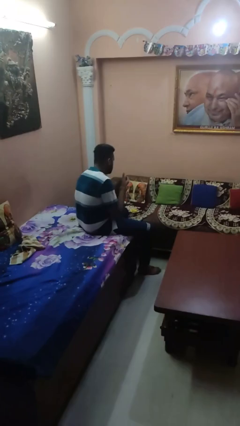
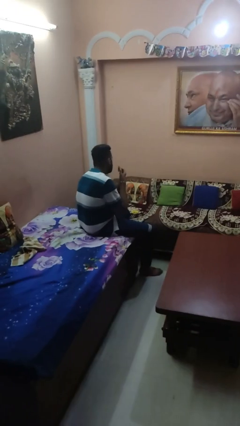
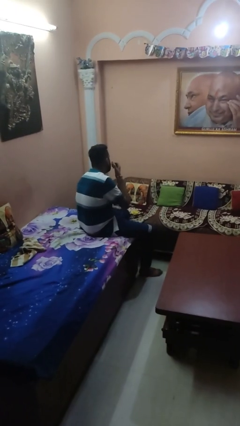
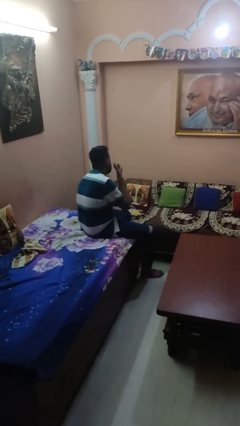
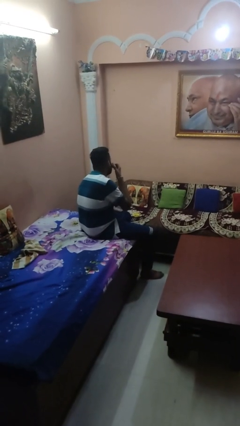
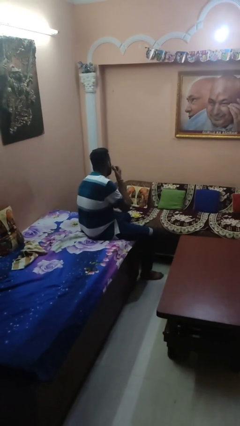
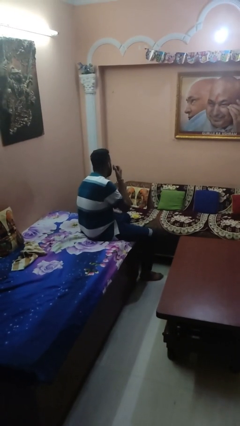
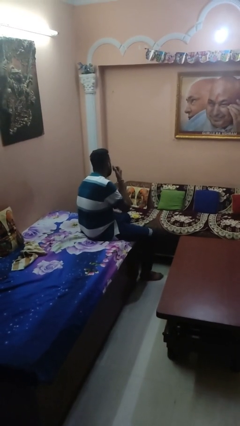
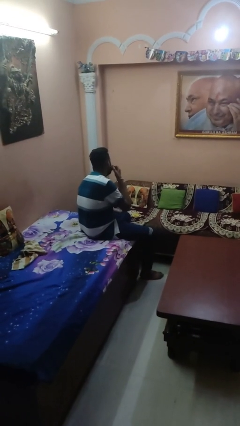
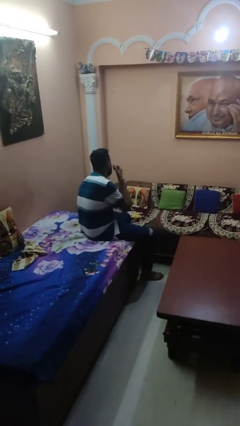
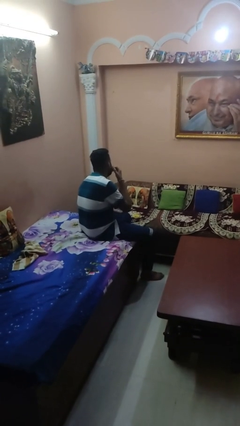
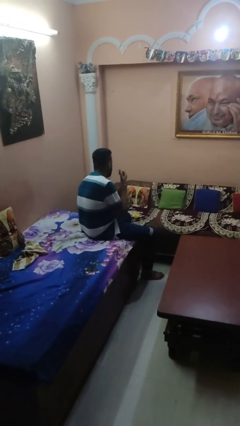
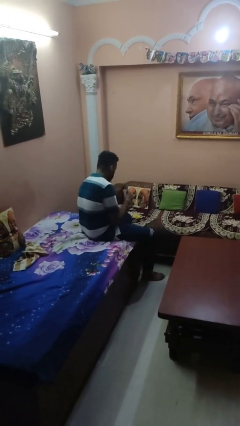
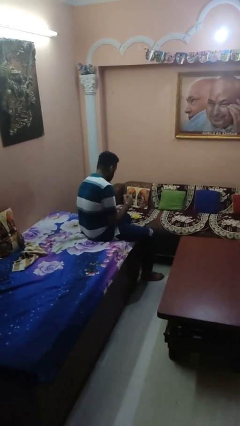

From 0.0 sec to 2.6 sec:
person applies foundation makeup

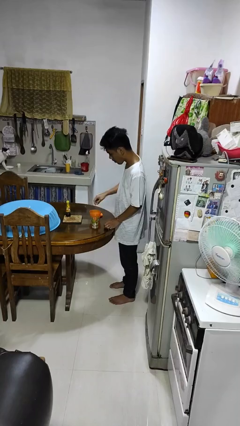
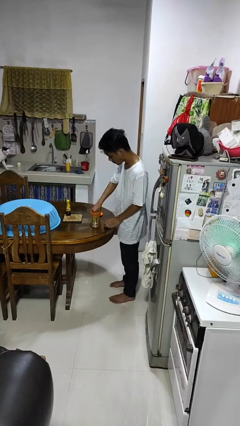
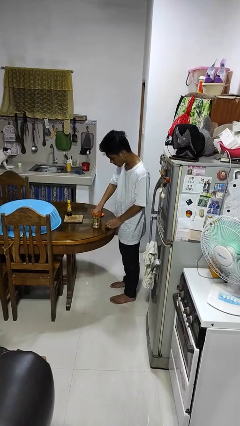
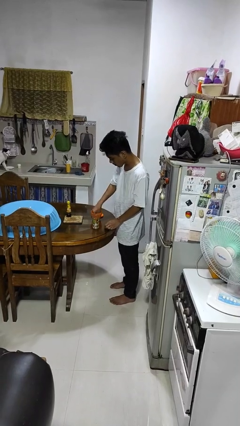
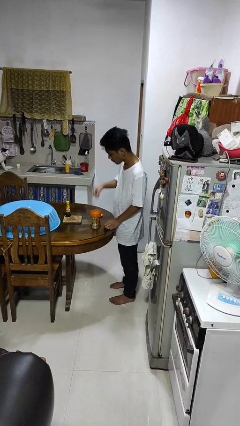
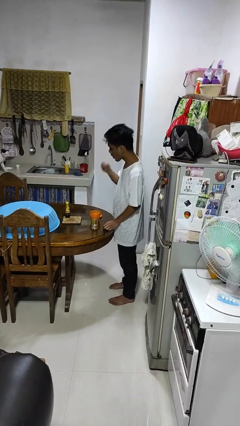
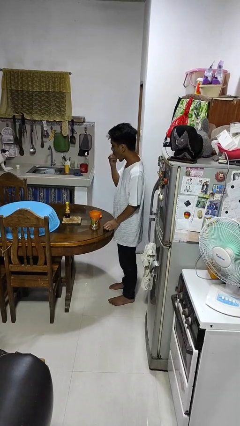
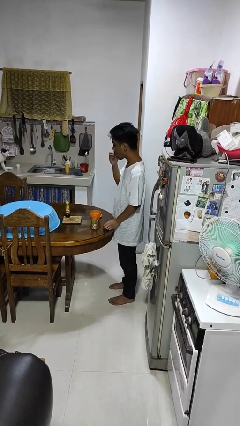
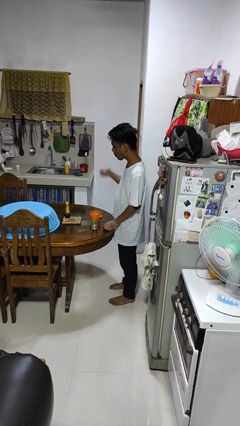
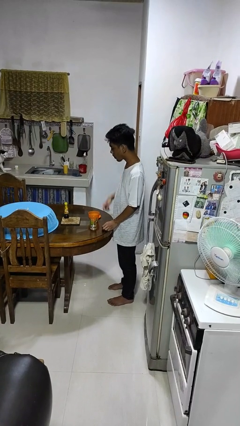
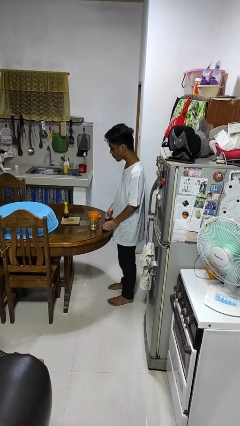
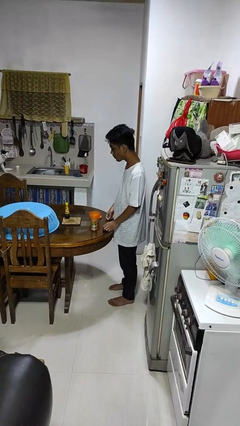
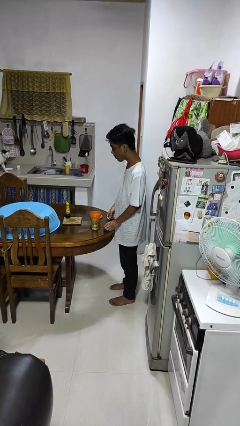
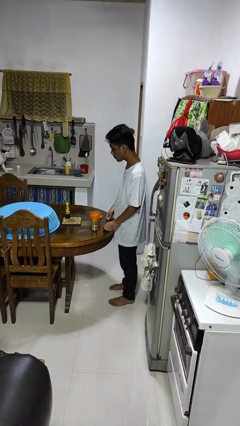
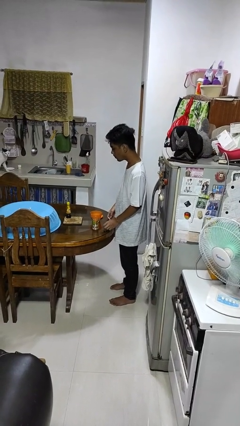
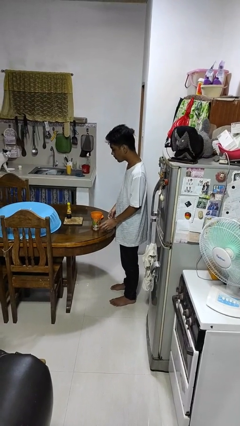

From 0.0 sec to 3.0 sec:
person takes medicine pills

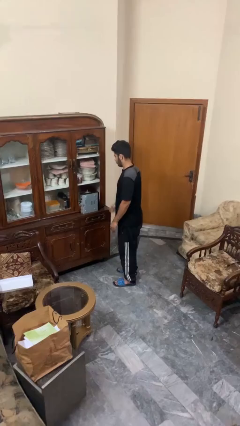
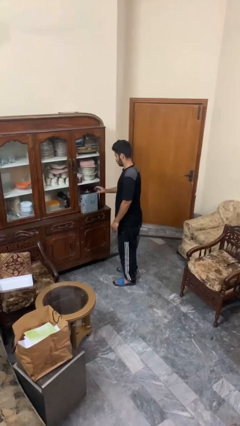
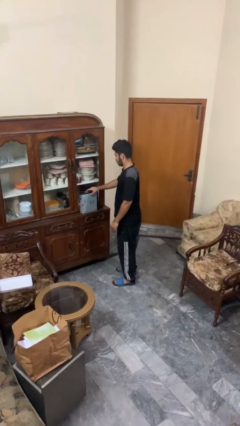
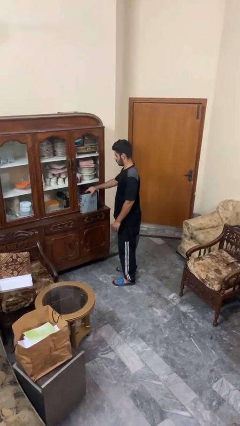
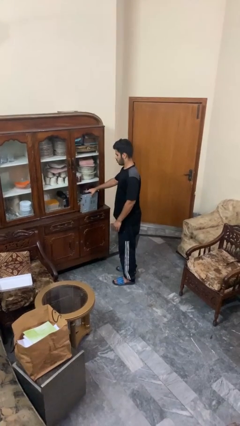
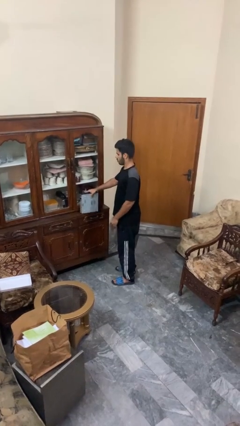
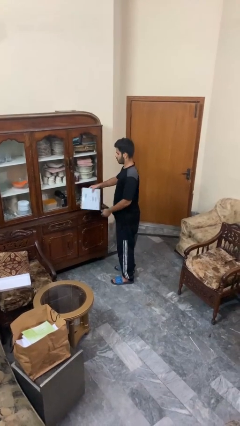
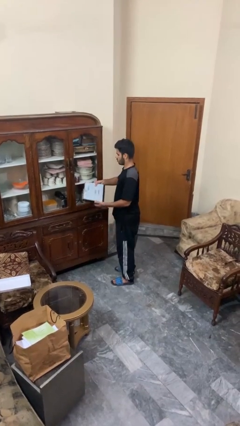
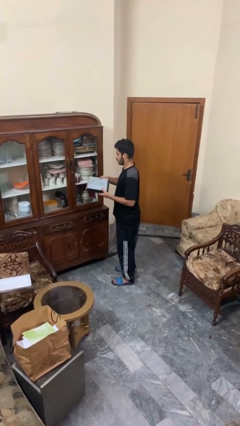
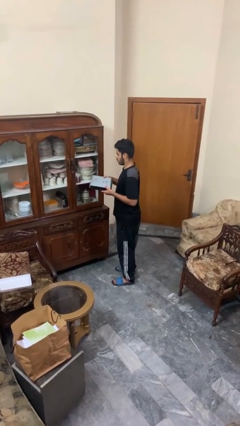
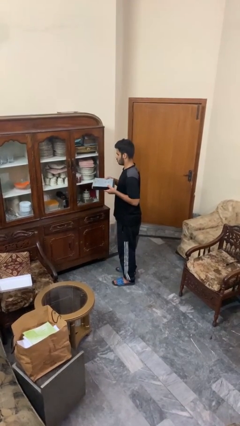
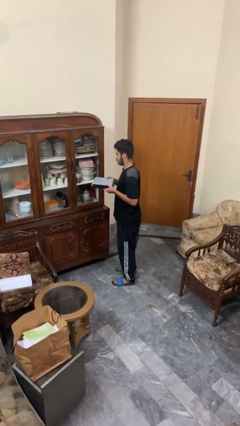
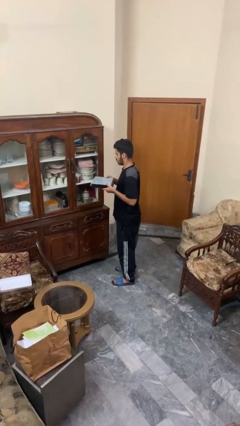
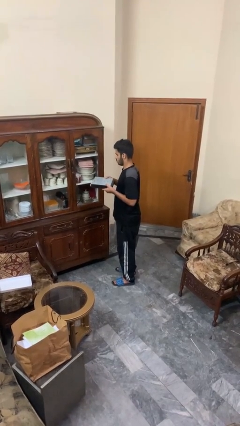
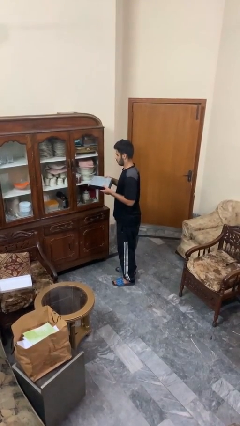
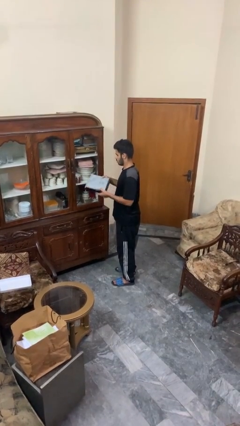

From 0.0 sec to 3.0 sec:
person picks up object from countertop

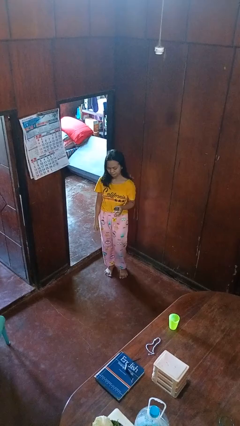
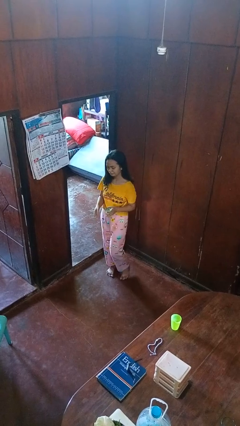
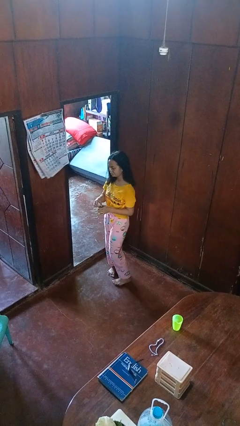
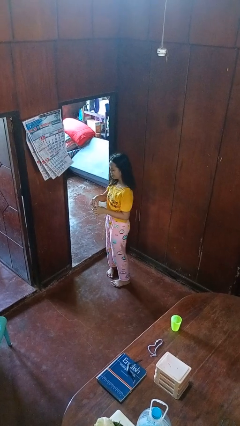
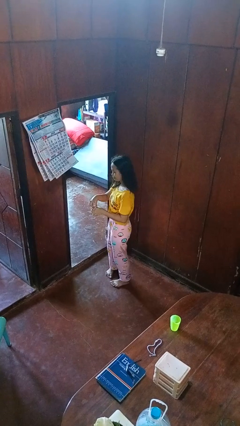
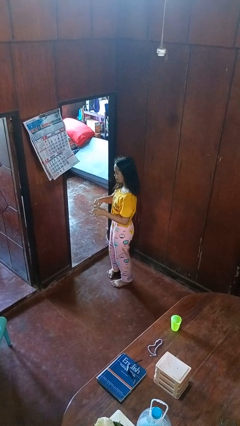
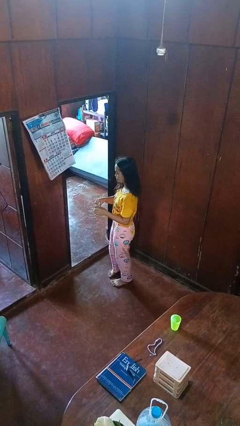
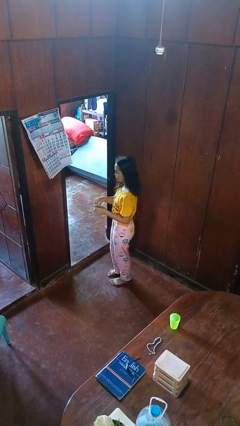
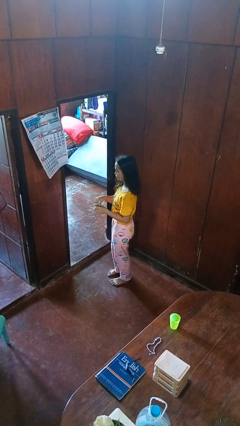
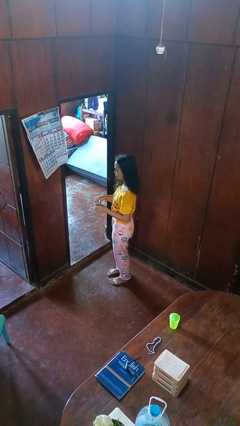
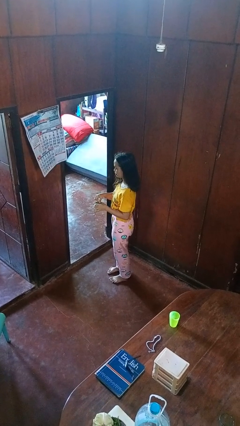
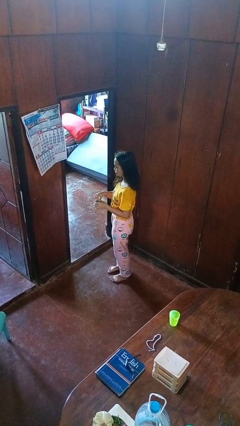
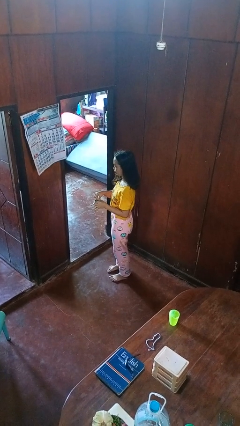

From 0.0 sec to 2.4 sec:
person opens beverage can

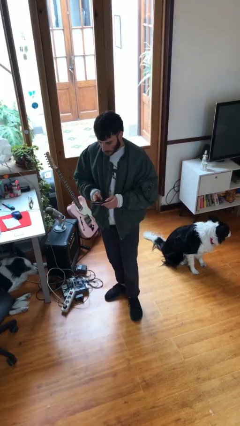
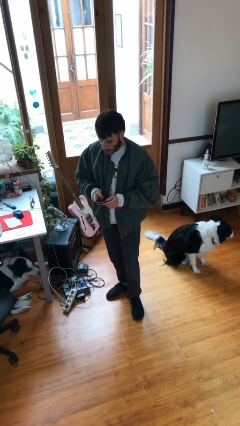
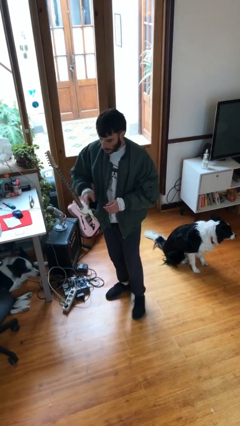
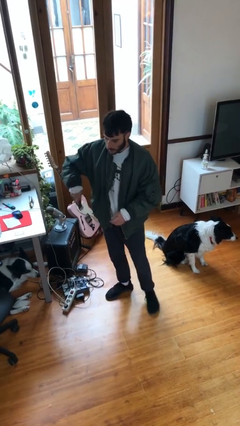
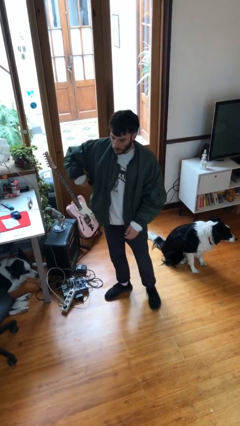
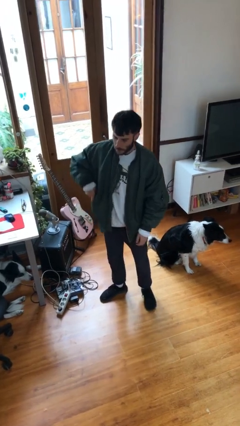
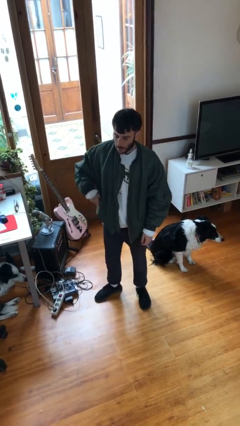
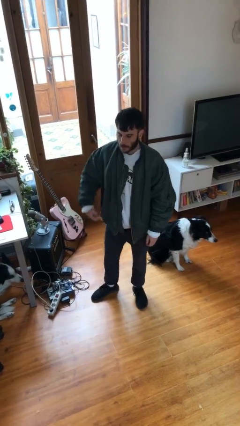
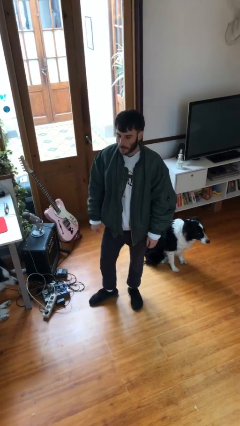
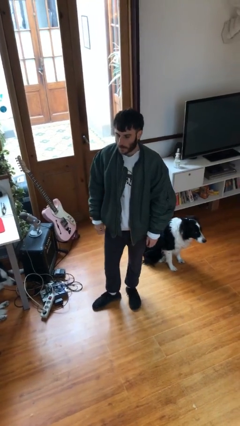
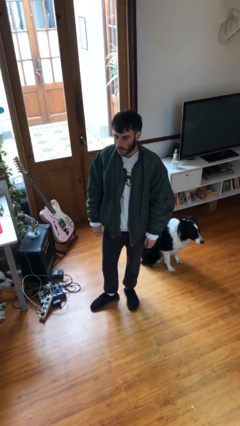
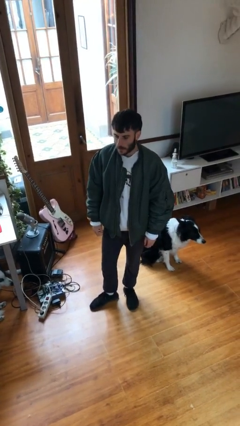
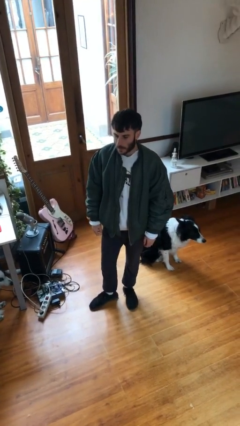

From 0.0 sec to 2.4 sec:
person puts phone into pocket

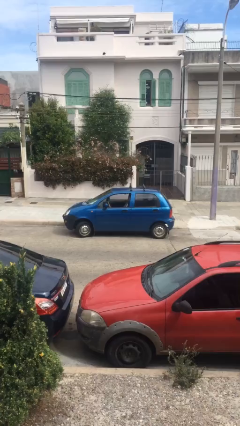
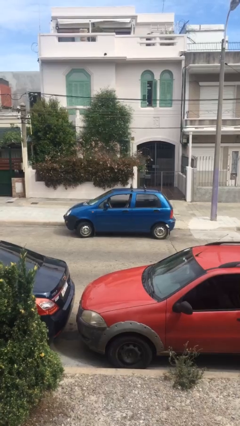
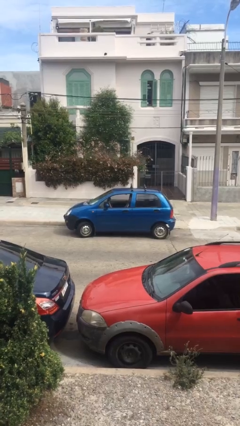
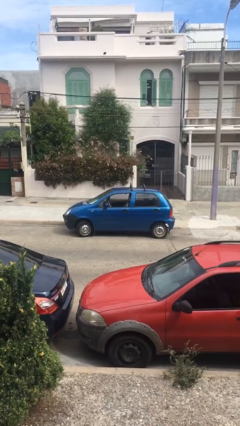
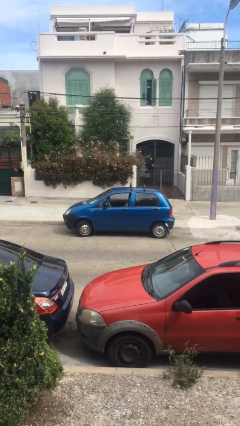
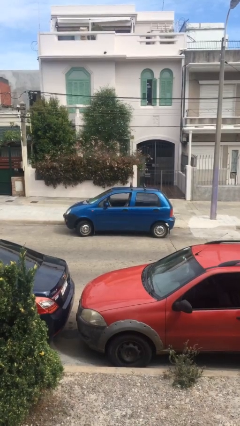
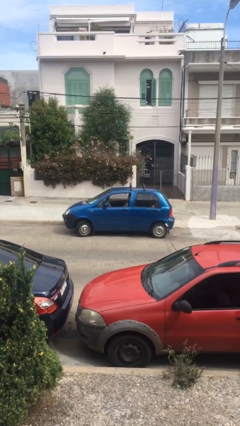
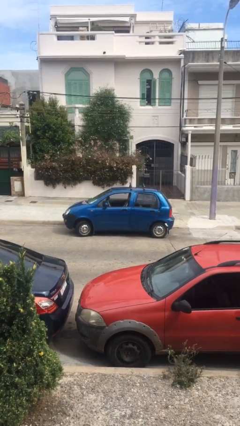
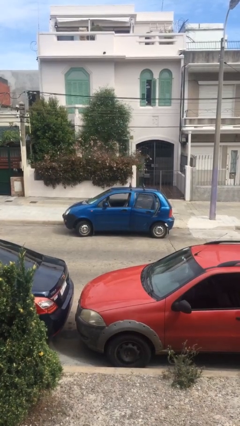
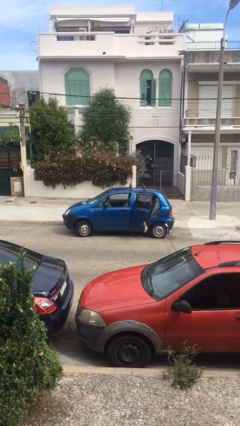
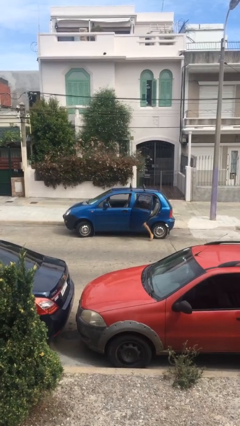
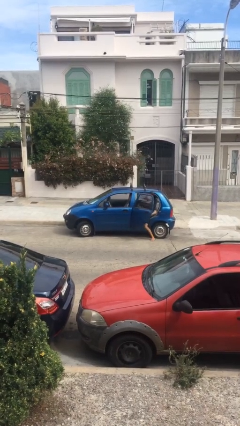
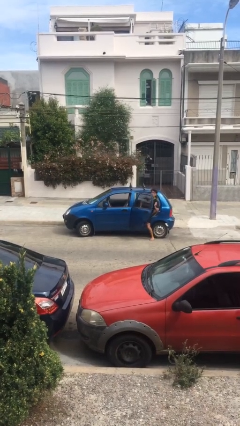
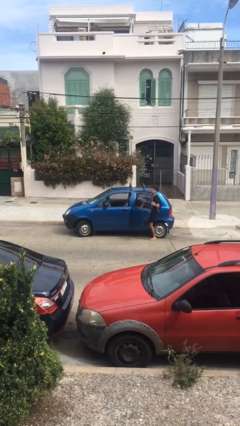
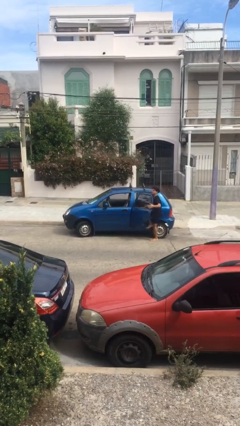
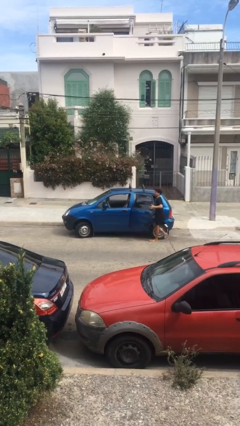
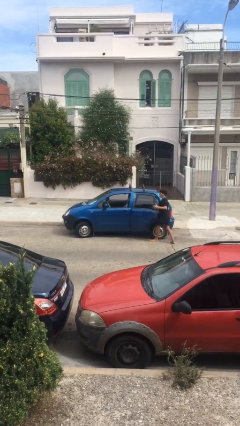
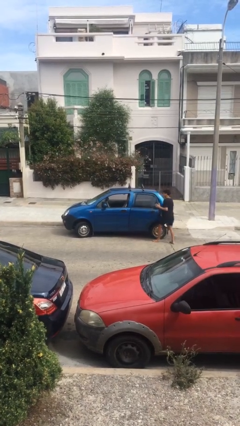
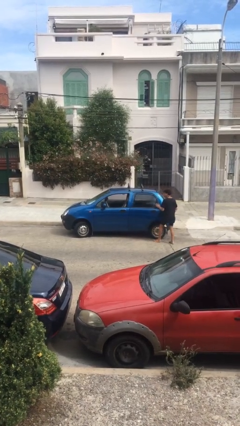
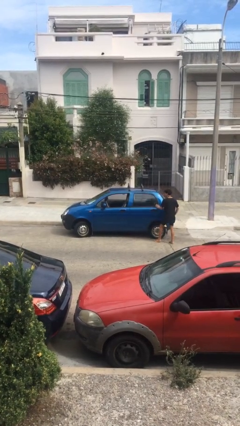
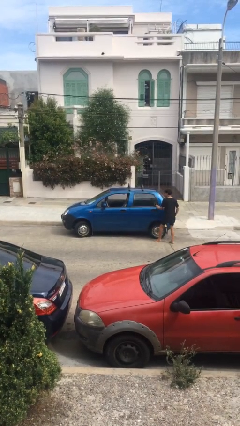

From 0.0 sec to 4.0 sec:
car drops off person
